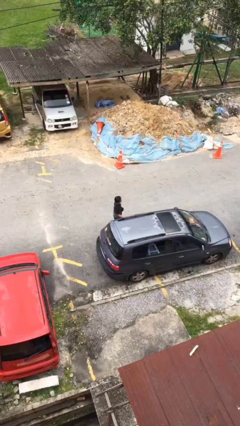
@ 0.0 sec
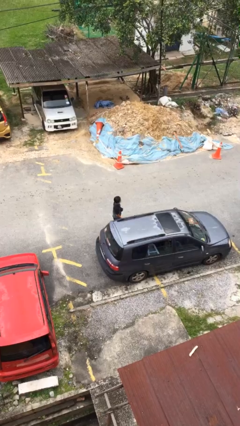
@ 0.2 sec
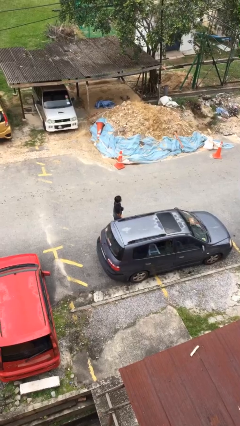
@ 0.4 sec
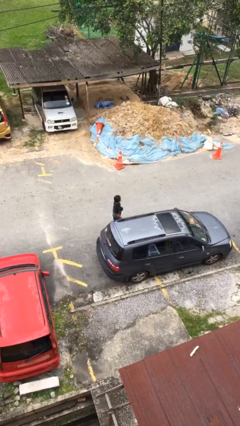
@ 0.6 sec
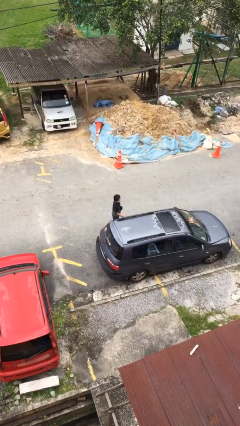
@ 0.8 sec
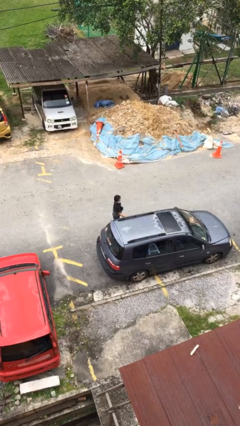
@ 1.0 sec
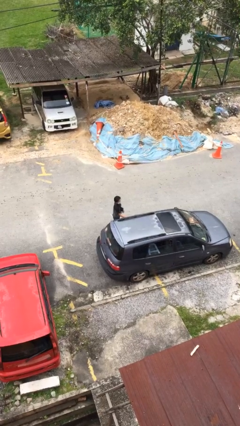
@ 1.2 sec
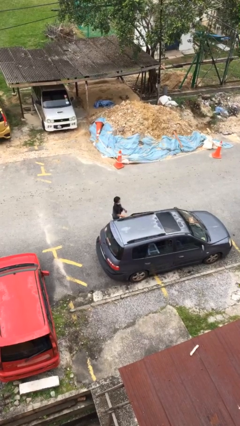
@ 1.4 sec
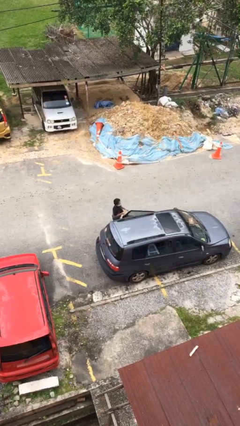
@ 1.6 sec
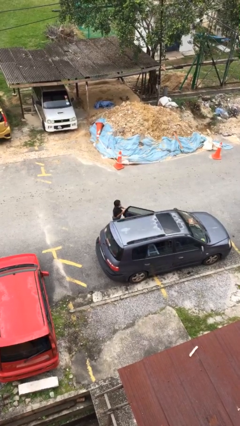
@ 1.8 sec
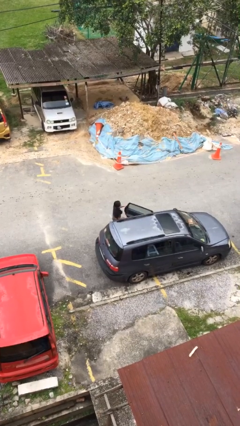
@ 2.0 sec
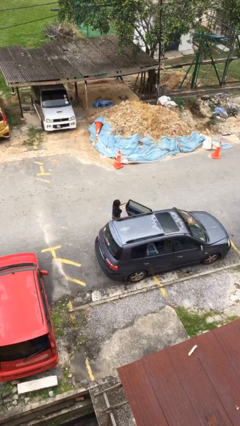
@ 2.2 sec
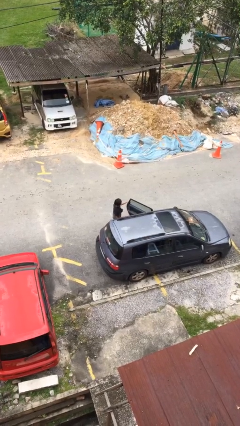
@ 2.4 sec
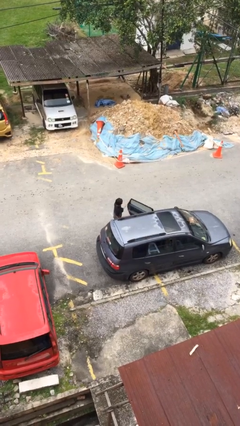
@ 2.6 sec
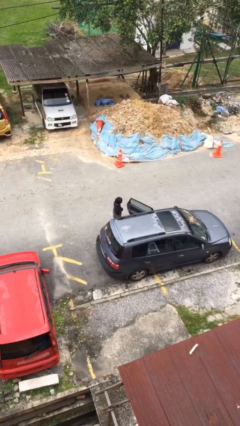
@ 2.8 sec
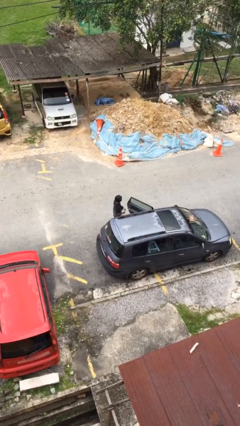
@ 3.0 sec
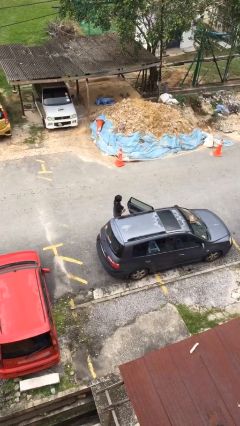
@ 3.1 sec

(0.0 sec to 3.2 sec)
person opens car door

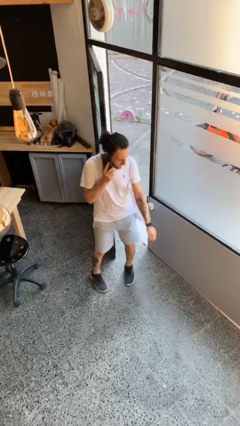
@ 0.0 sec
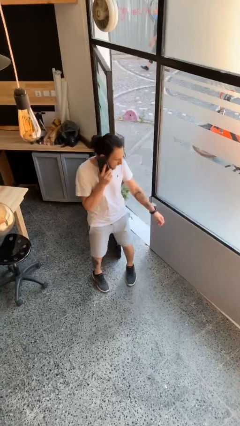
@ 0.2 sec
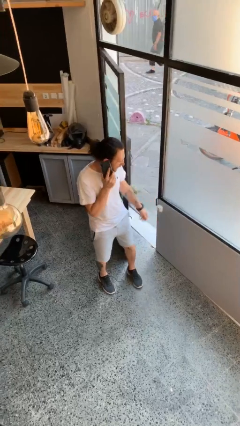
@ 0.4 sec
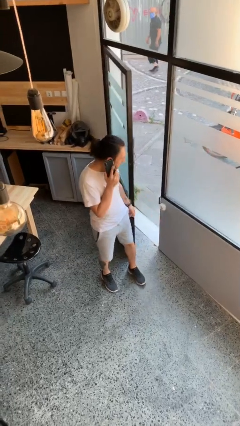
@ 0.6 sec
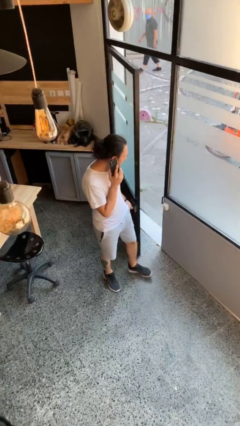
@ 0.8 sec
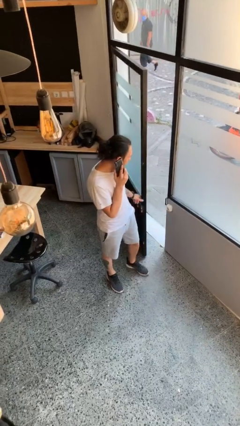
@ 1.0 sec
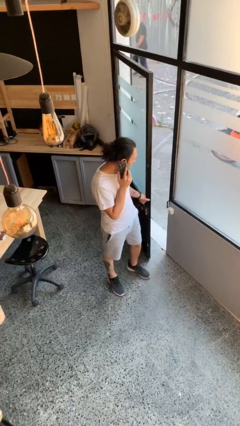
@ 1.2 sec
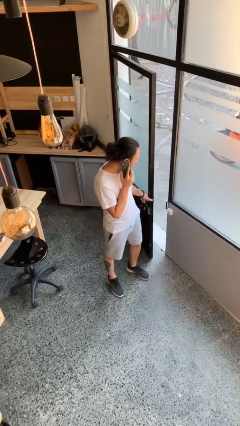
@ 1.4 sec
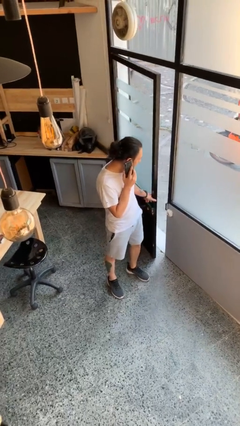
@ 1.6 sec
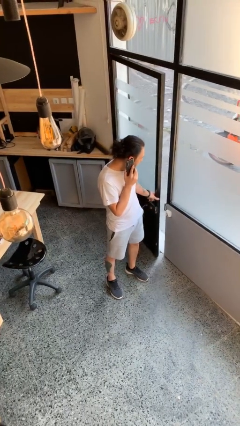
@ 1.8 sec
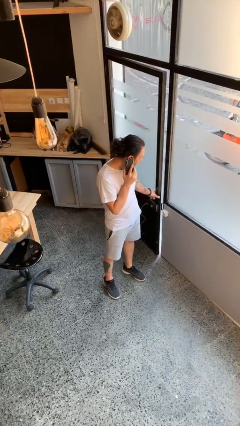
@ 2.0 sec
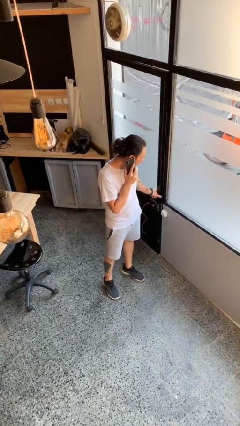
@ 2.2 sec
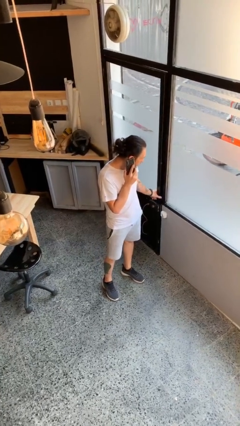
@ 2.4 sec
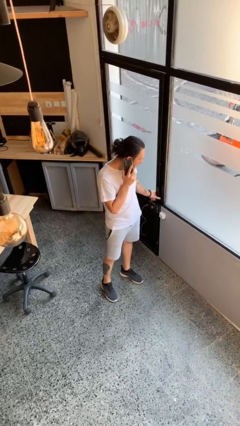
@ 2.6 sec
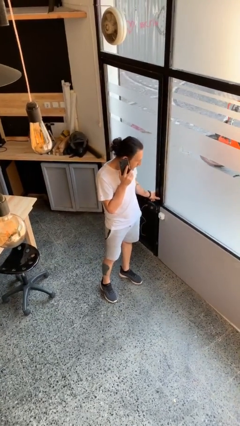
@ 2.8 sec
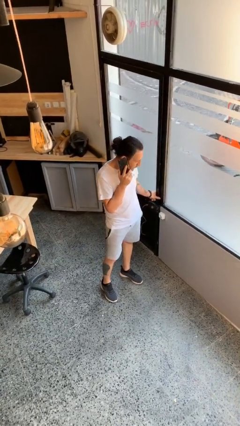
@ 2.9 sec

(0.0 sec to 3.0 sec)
person closes facility door

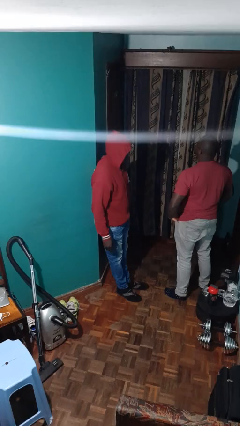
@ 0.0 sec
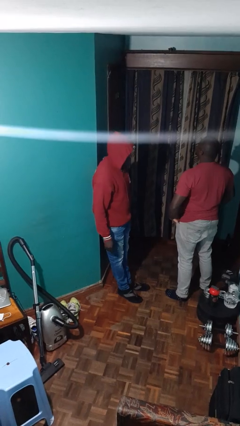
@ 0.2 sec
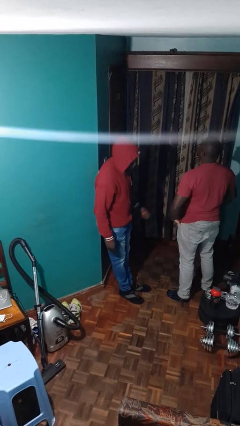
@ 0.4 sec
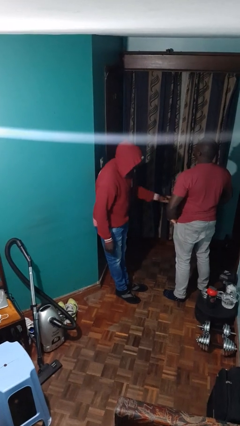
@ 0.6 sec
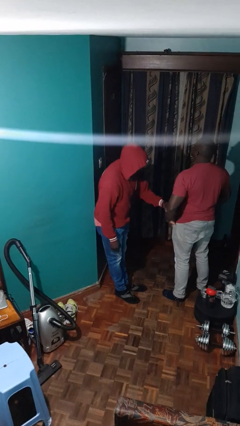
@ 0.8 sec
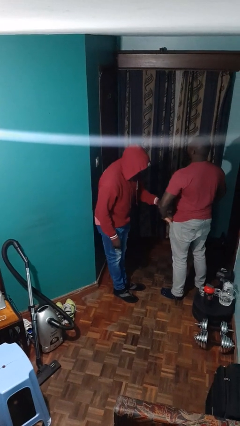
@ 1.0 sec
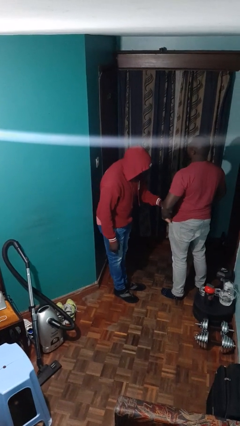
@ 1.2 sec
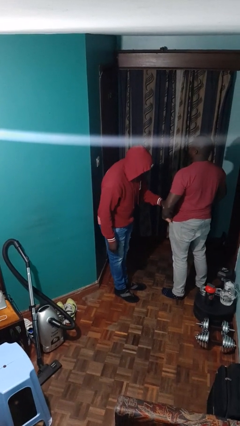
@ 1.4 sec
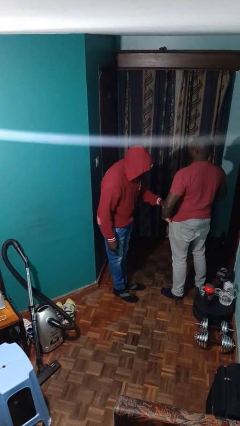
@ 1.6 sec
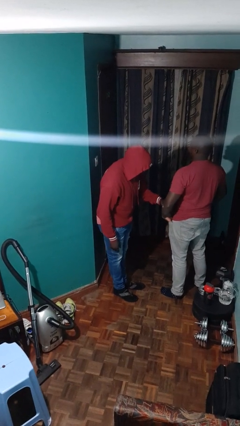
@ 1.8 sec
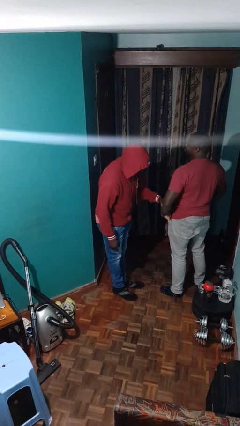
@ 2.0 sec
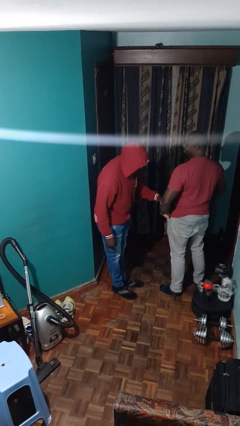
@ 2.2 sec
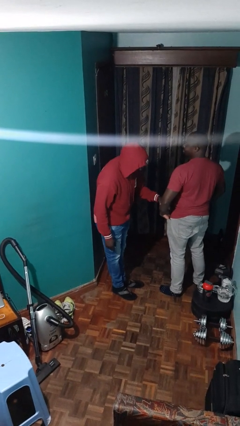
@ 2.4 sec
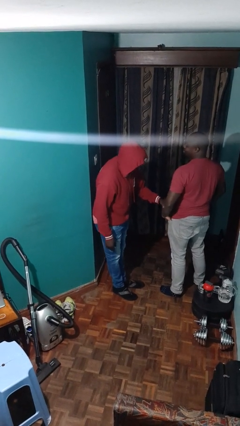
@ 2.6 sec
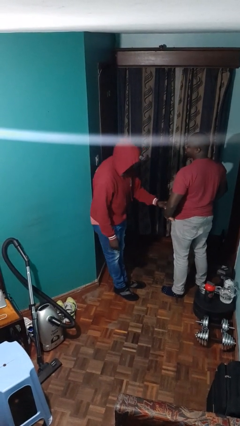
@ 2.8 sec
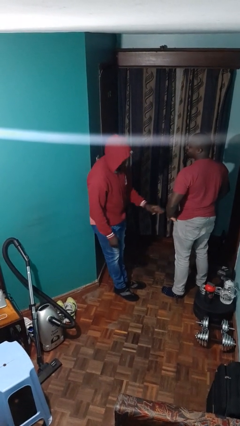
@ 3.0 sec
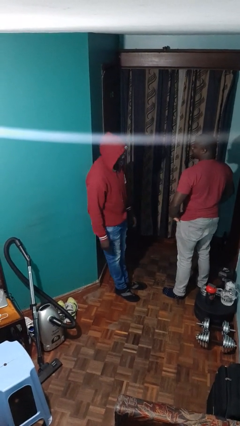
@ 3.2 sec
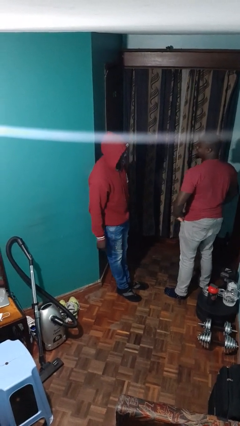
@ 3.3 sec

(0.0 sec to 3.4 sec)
person grabs person by forearm

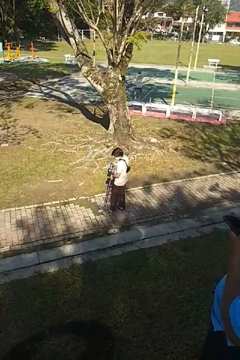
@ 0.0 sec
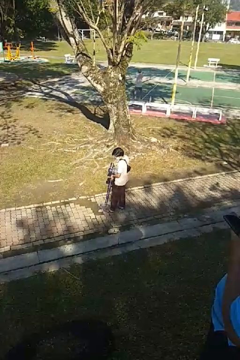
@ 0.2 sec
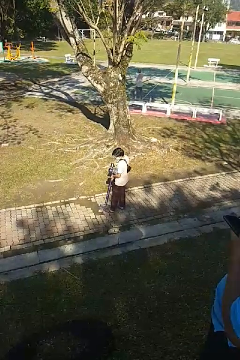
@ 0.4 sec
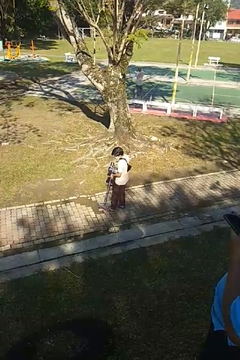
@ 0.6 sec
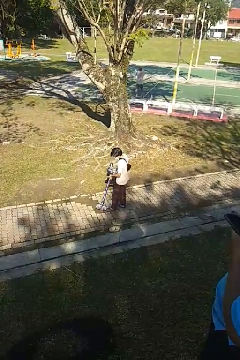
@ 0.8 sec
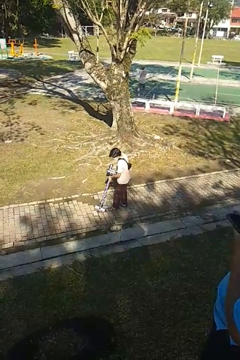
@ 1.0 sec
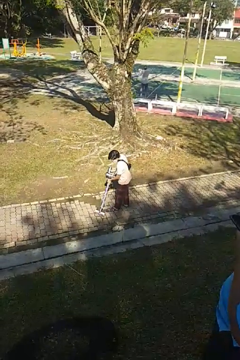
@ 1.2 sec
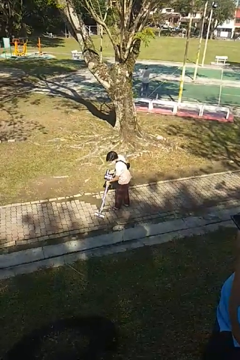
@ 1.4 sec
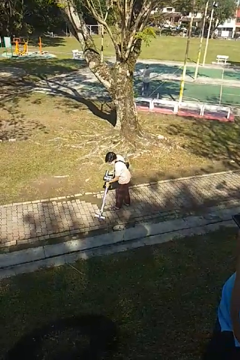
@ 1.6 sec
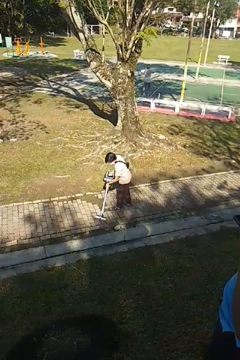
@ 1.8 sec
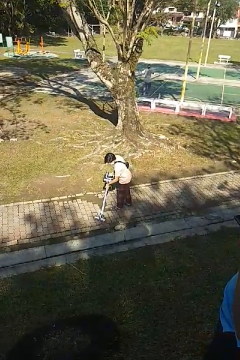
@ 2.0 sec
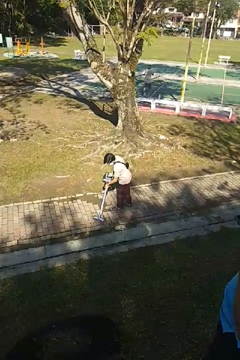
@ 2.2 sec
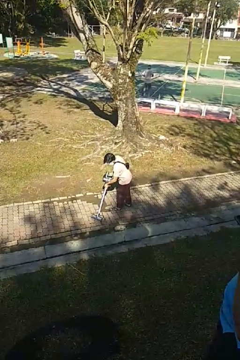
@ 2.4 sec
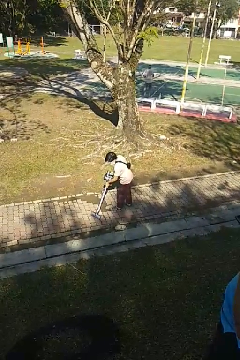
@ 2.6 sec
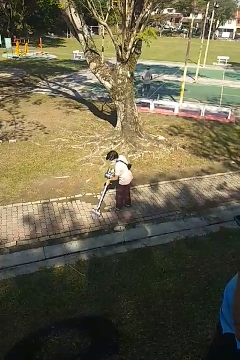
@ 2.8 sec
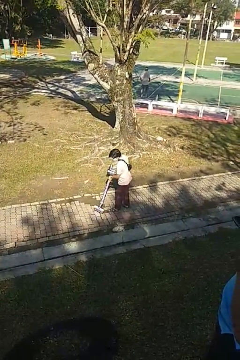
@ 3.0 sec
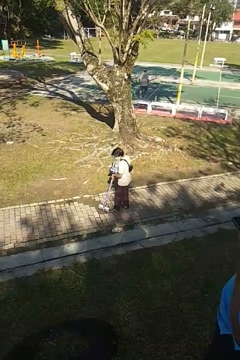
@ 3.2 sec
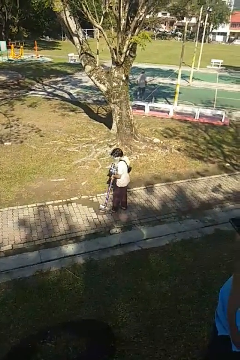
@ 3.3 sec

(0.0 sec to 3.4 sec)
person vacuums carpet

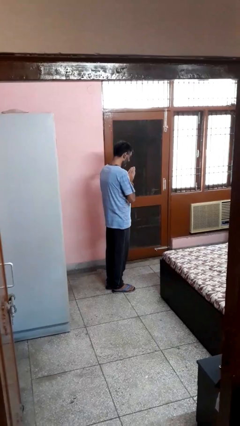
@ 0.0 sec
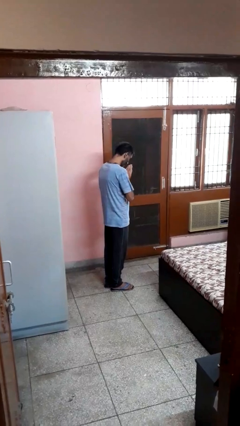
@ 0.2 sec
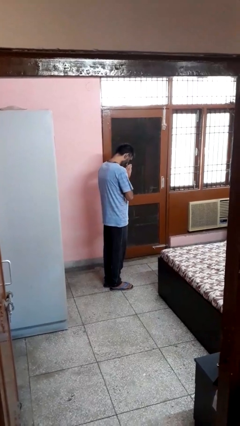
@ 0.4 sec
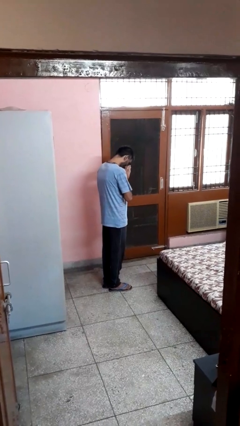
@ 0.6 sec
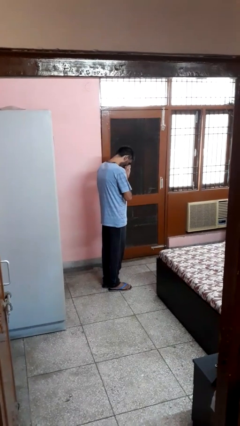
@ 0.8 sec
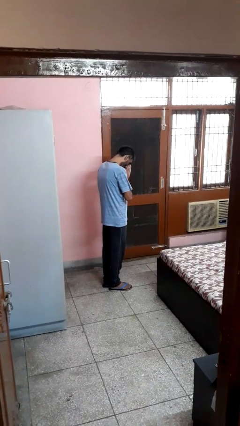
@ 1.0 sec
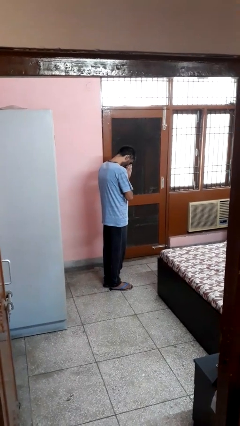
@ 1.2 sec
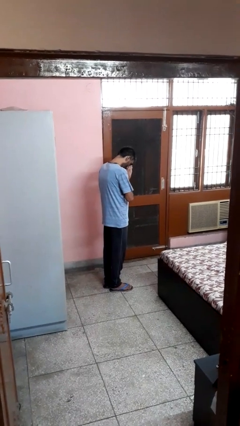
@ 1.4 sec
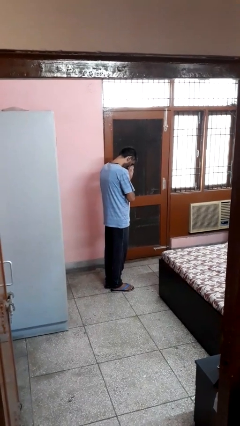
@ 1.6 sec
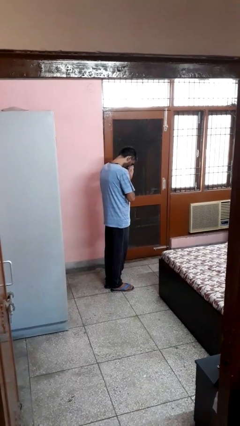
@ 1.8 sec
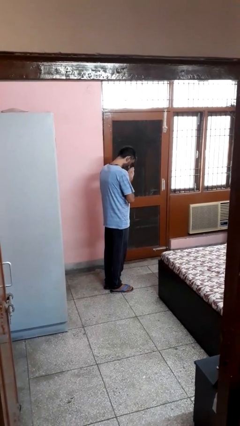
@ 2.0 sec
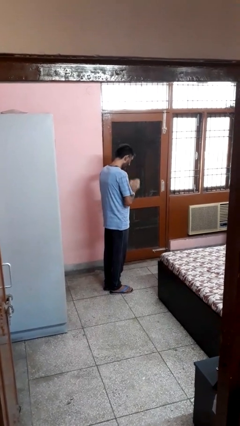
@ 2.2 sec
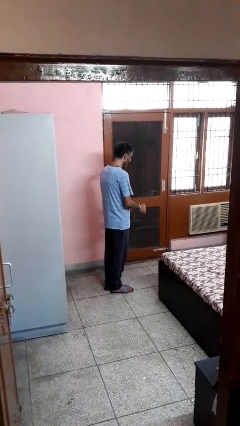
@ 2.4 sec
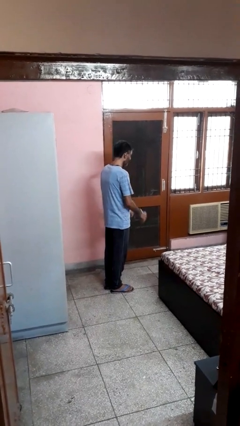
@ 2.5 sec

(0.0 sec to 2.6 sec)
person prays

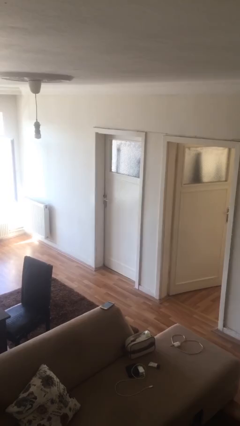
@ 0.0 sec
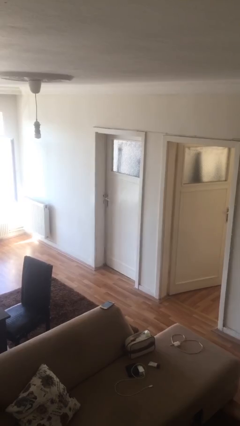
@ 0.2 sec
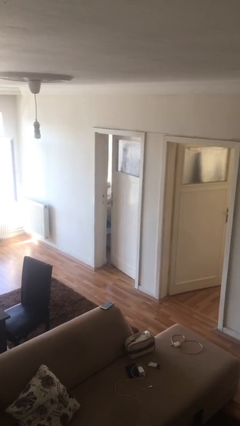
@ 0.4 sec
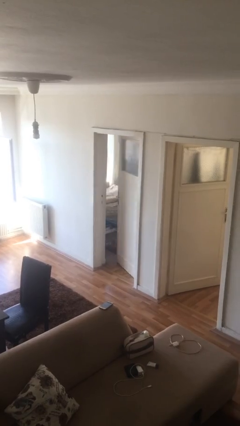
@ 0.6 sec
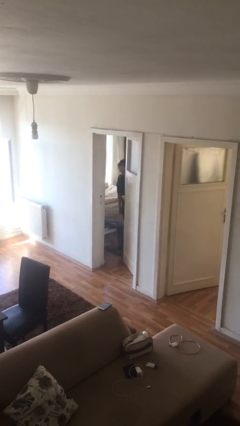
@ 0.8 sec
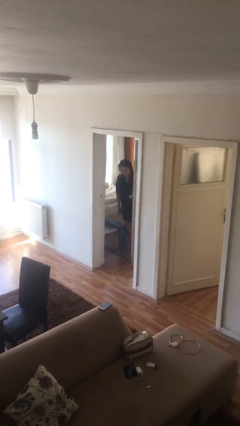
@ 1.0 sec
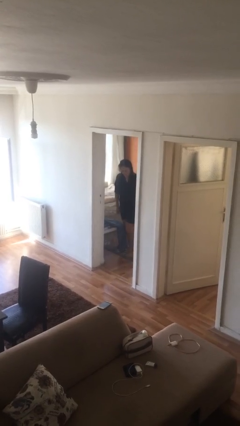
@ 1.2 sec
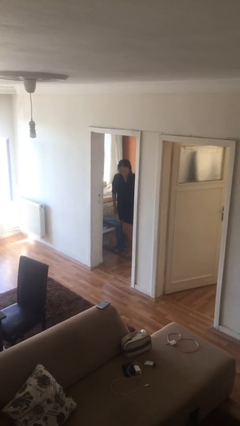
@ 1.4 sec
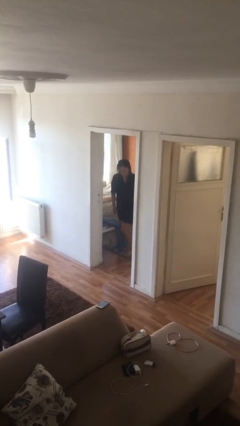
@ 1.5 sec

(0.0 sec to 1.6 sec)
person opens facility door

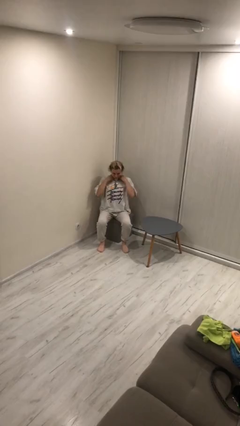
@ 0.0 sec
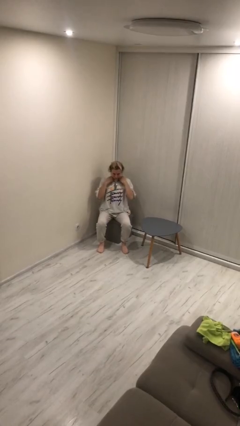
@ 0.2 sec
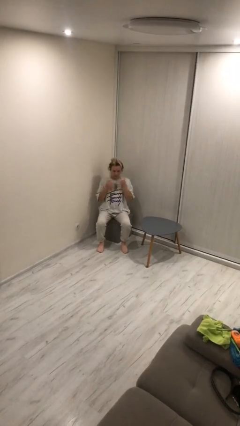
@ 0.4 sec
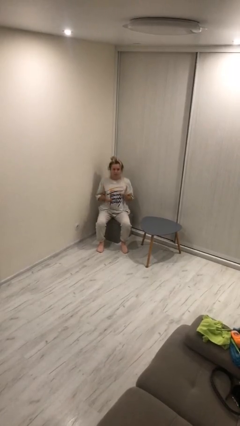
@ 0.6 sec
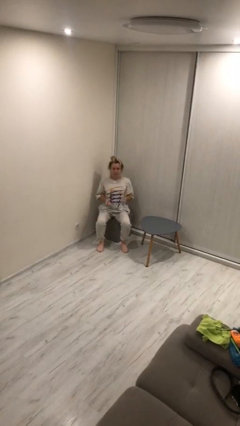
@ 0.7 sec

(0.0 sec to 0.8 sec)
person takes off necklace
